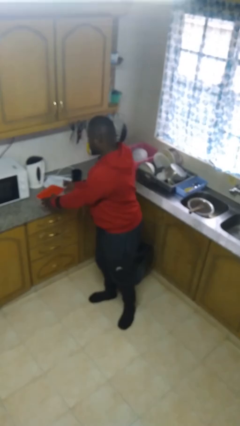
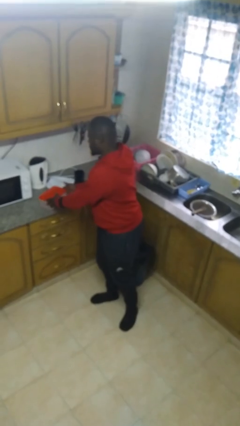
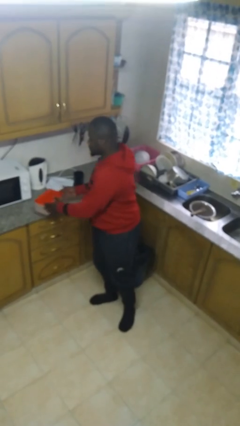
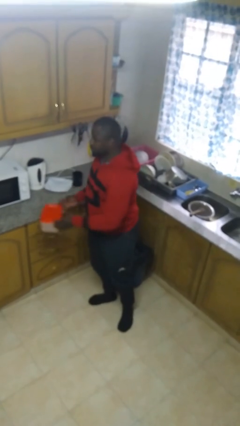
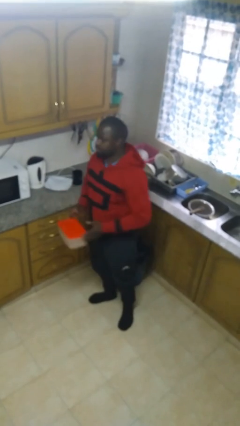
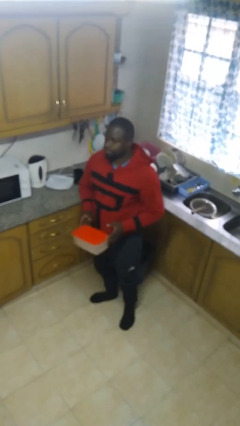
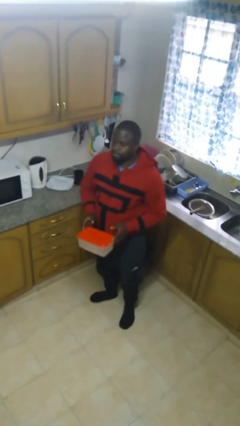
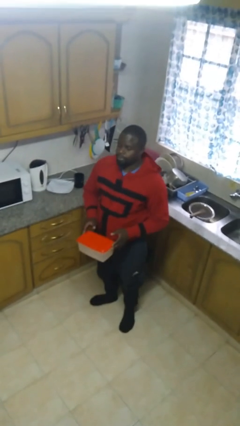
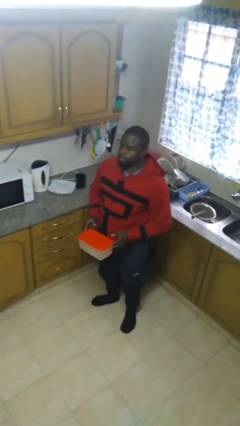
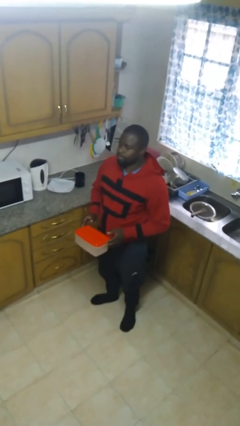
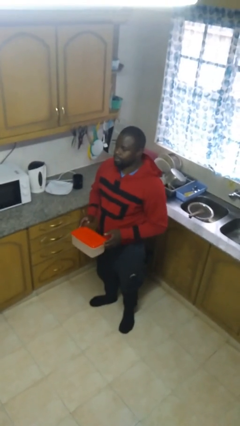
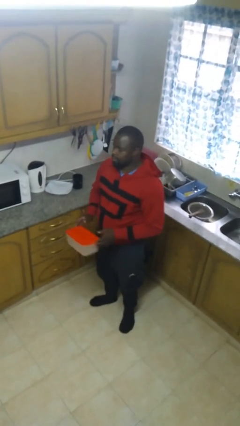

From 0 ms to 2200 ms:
person picks up object from countertop

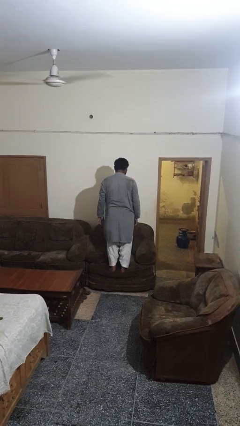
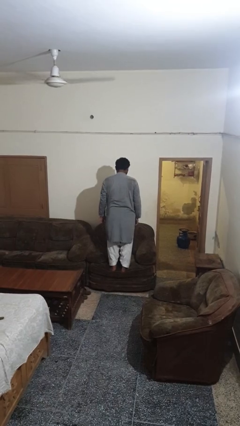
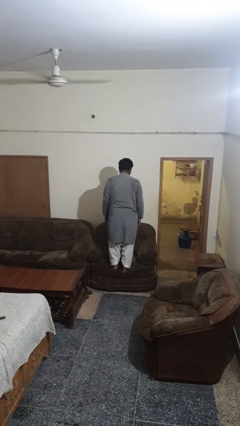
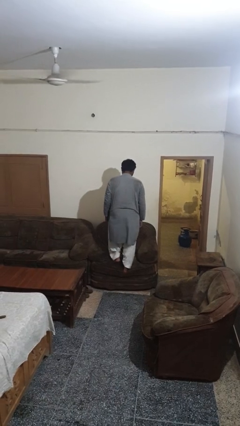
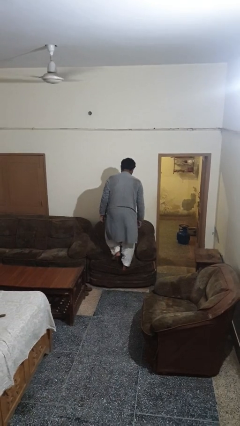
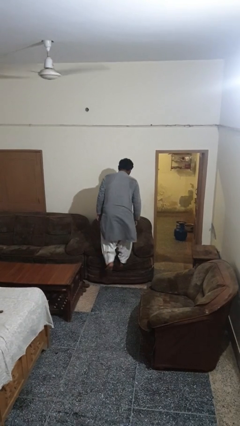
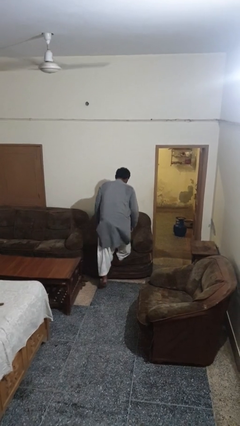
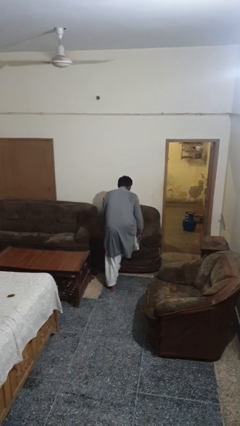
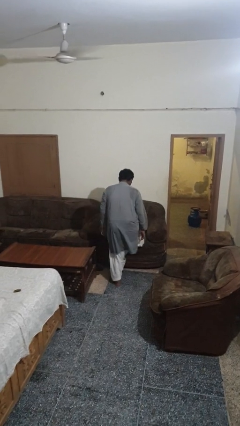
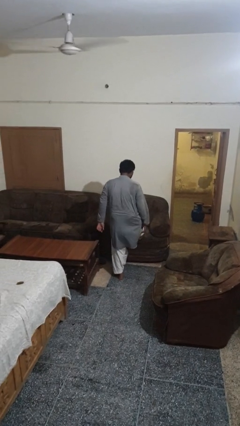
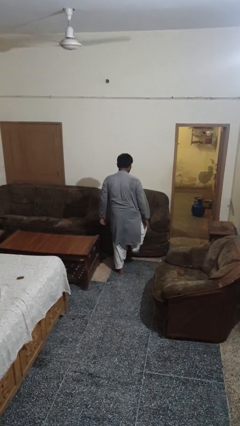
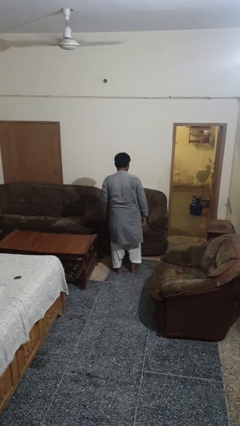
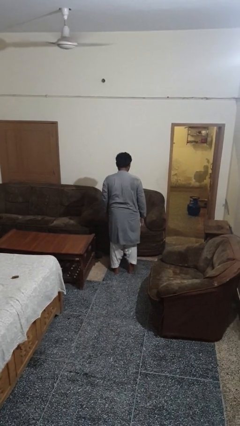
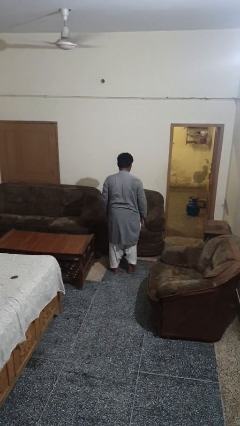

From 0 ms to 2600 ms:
person climbs off couch

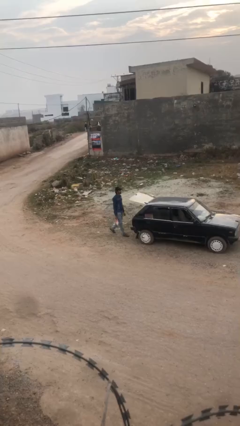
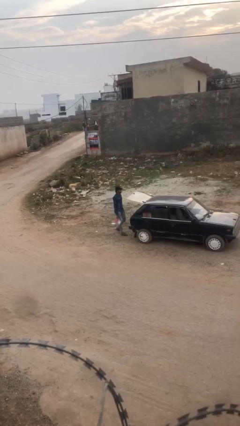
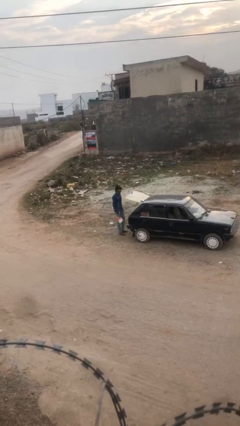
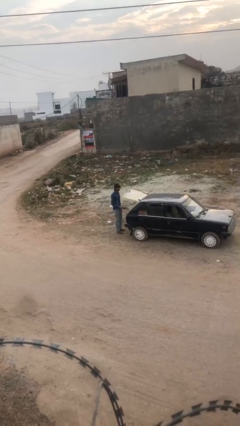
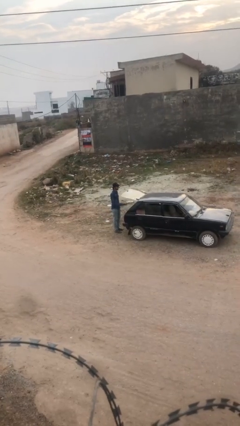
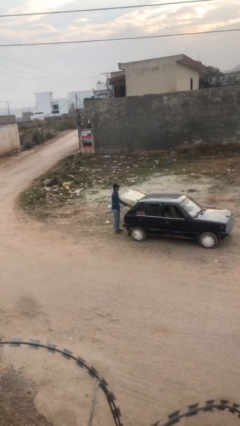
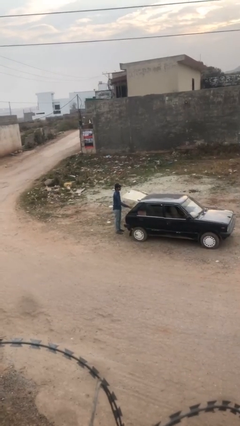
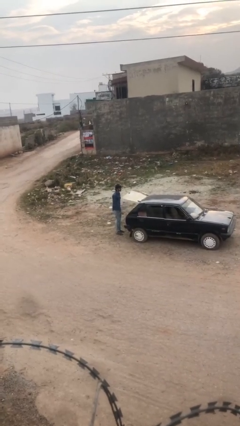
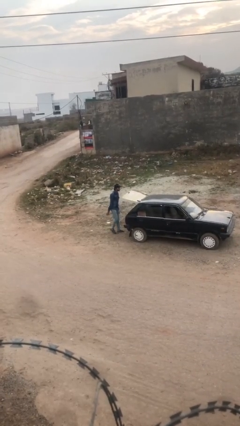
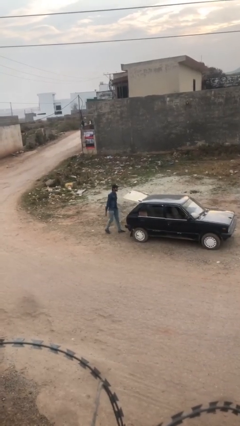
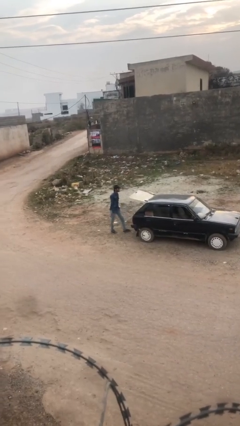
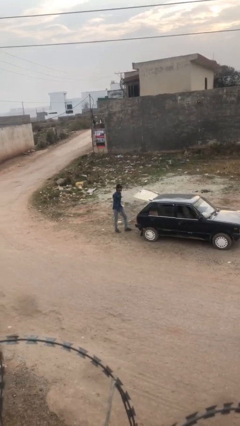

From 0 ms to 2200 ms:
person loads car

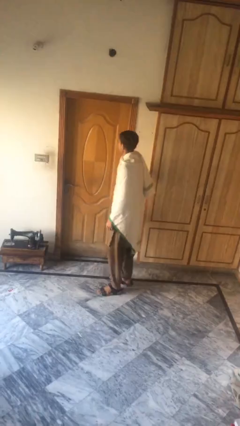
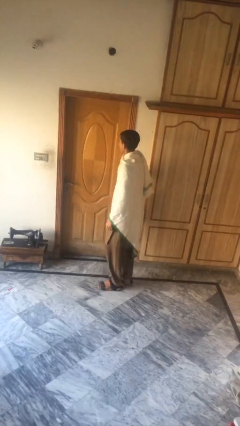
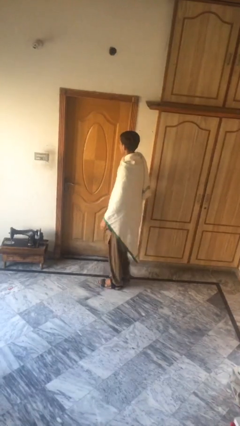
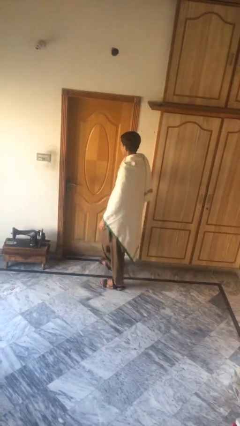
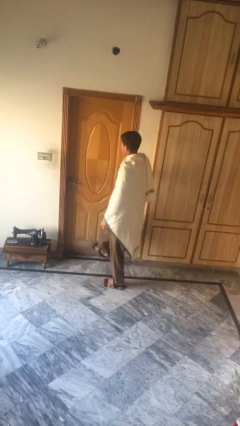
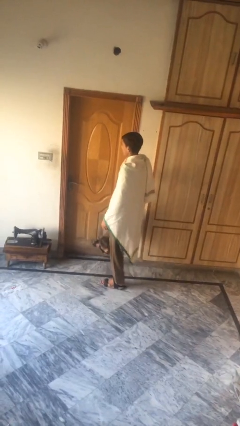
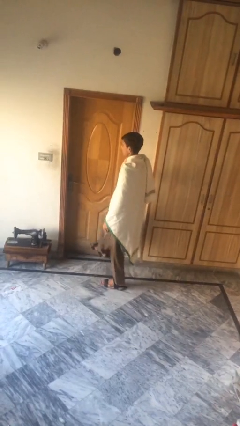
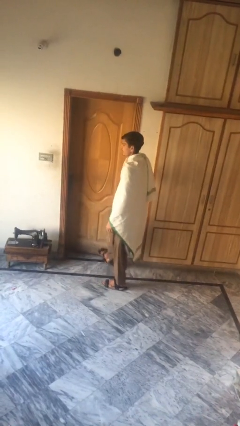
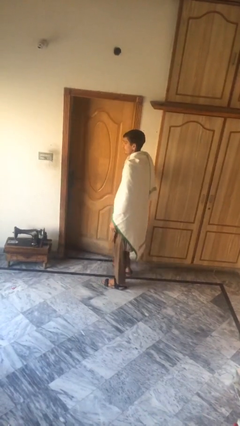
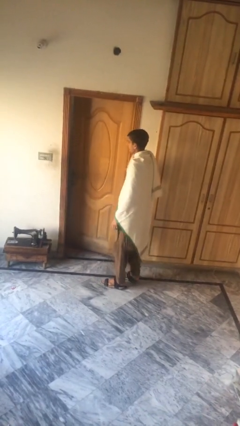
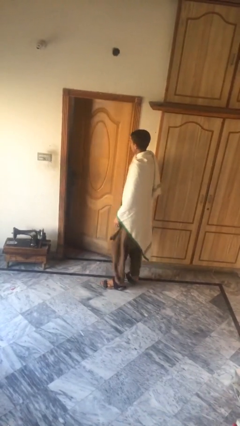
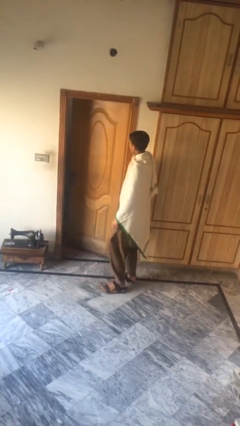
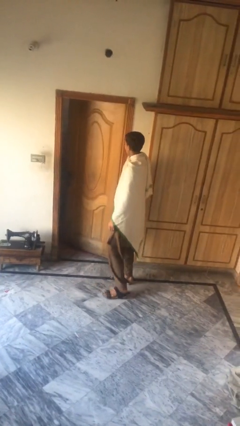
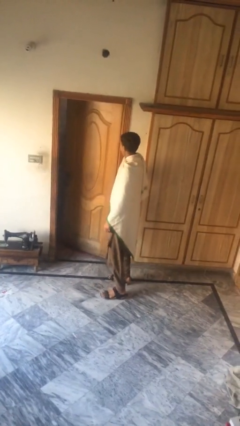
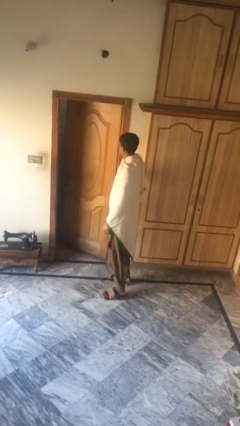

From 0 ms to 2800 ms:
person opens facility door

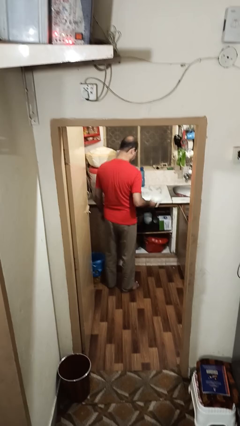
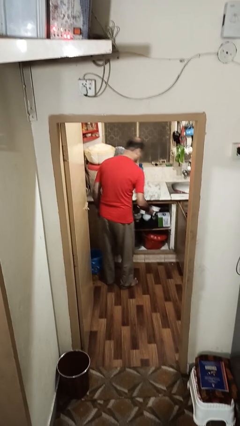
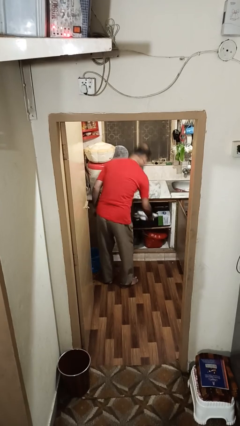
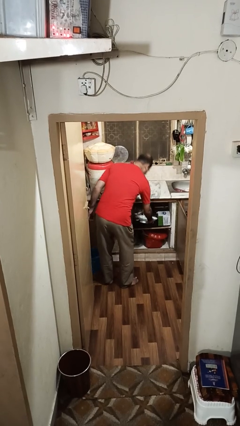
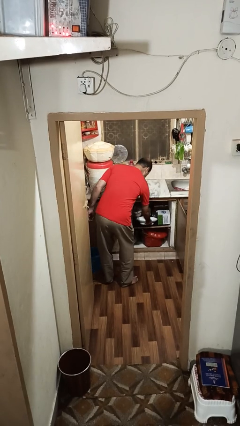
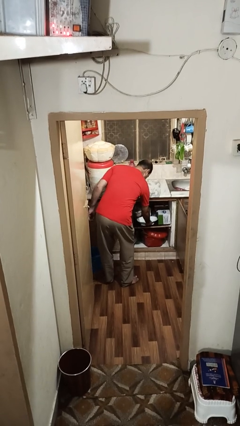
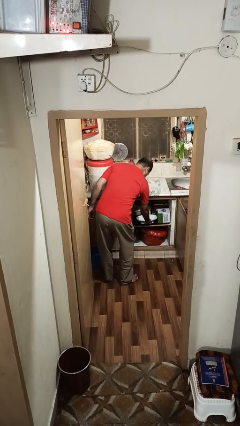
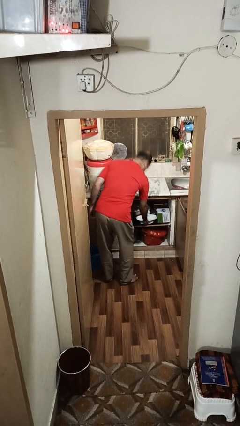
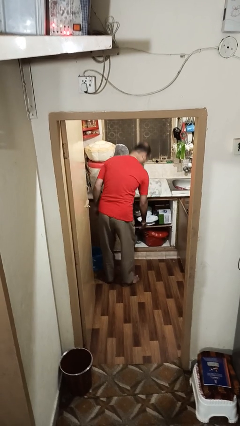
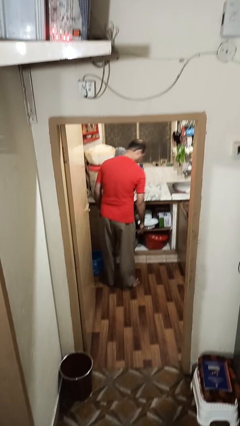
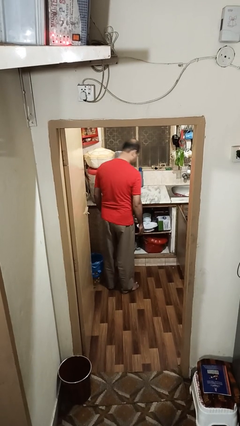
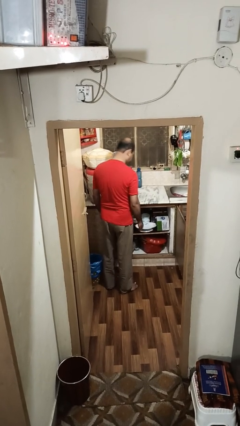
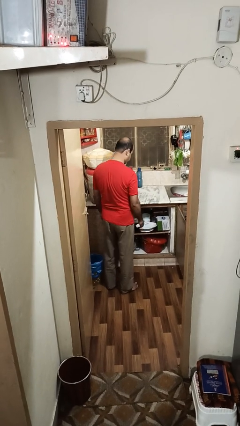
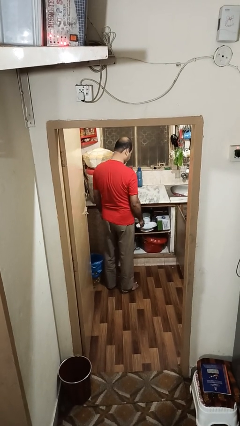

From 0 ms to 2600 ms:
person puts down object into cabinet

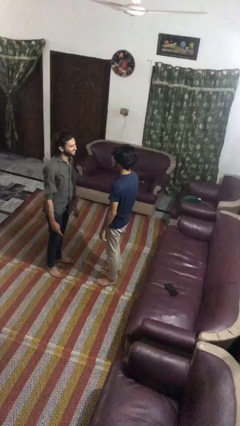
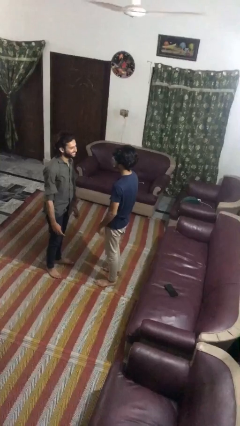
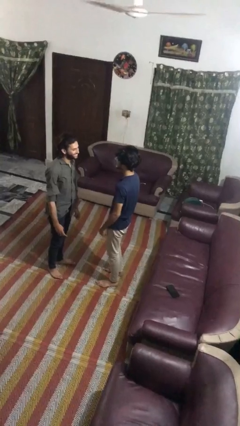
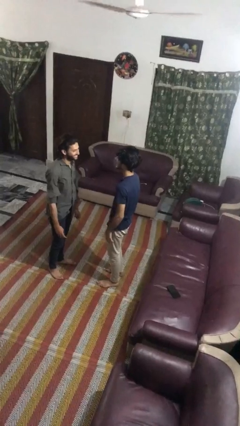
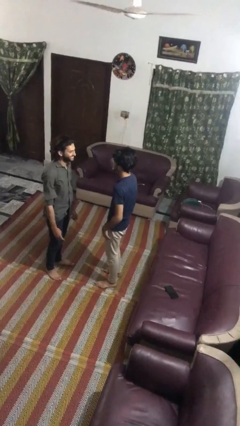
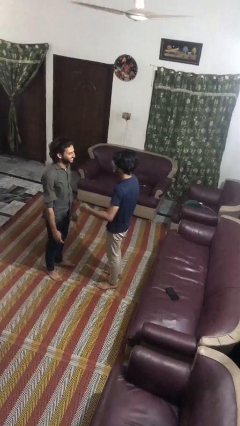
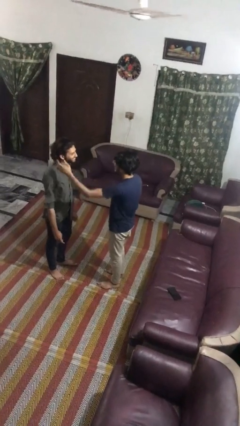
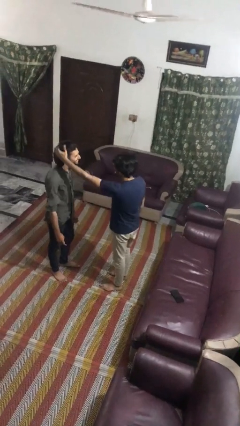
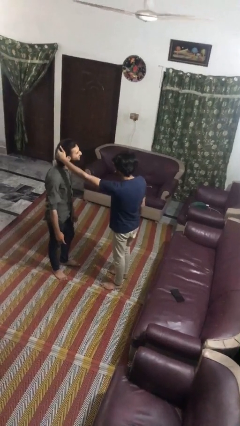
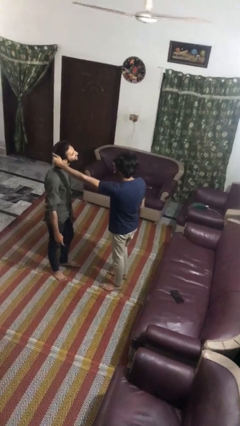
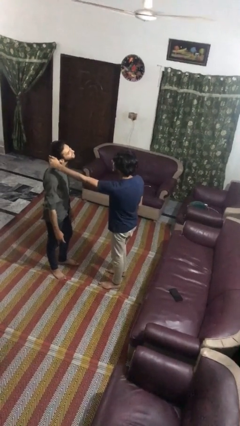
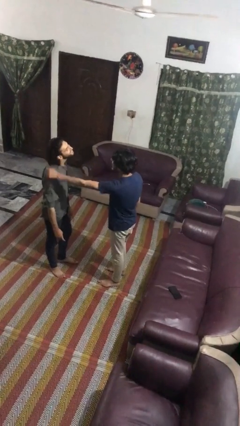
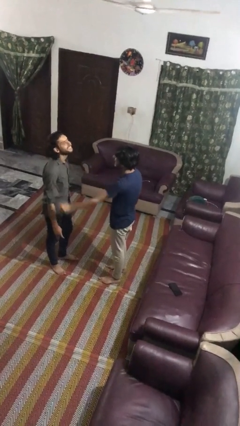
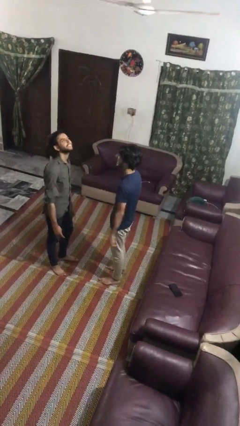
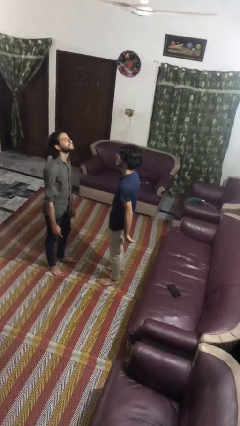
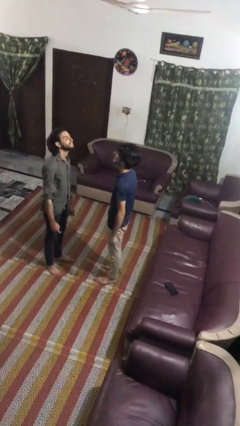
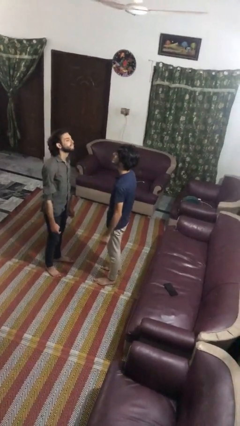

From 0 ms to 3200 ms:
person grabs person by hair

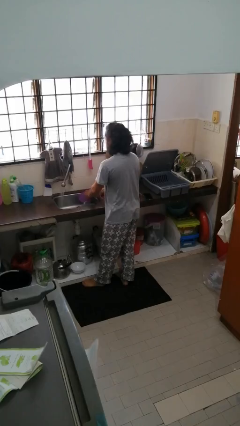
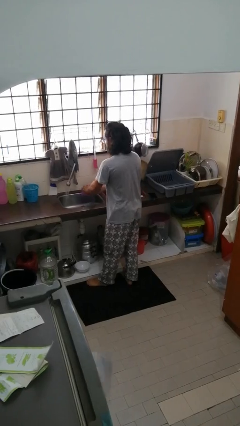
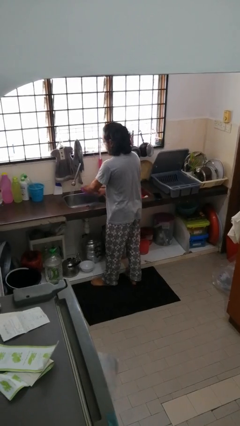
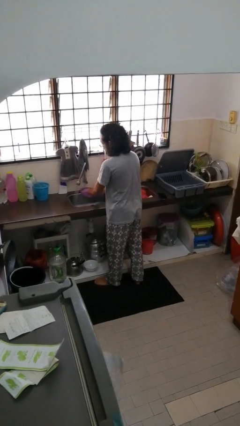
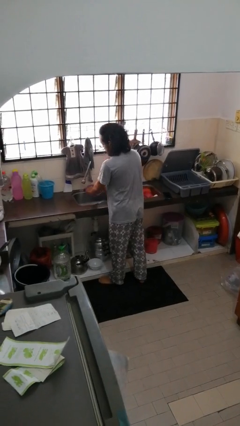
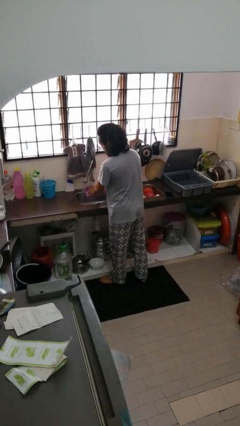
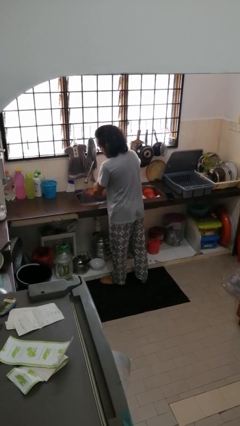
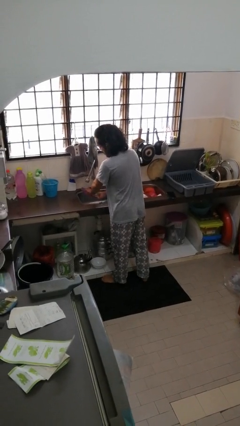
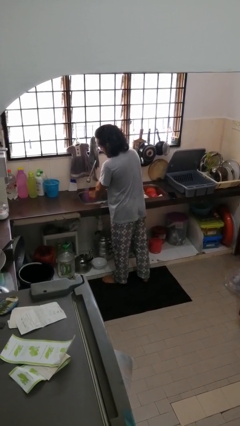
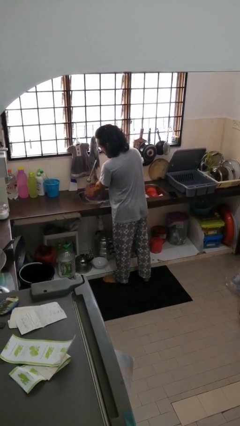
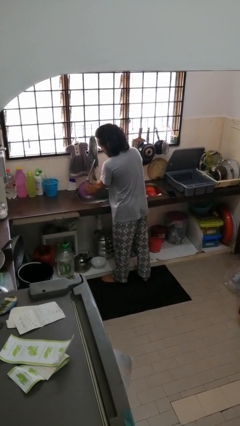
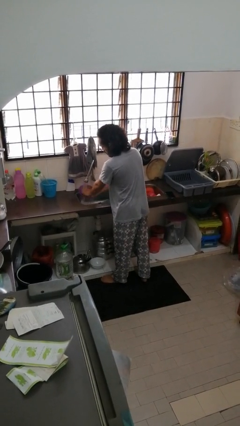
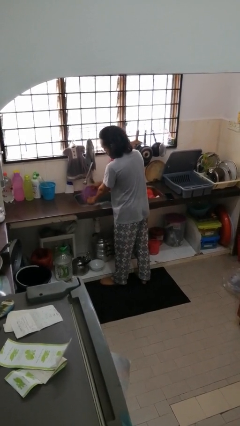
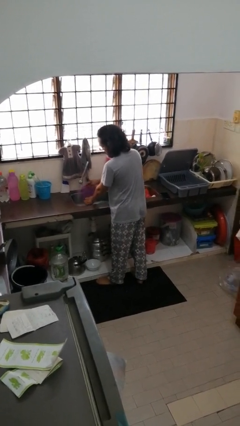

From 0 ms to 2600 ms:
person washes dish
